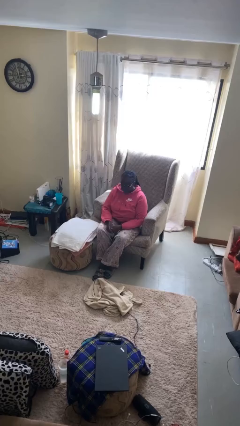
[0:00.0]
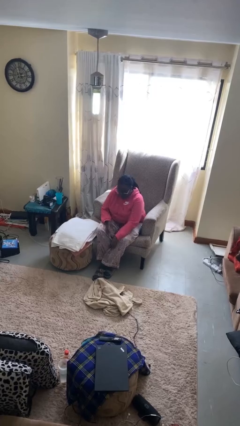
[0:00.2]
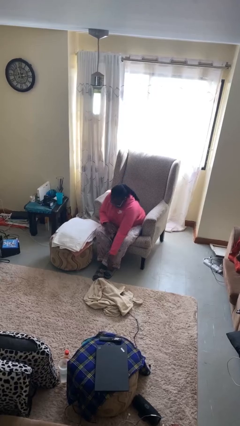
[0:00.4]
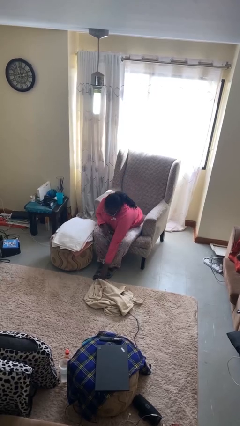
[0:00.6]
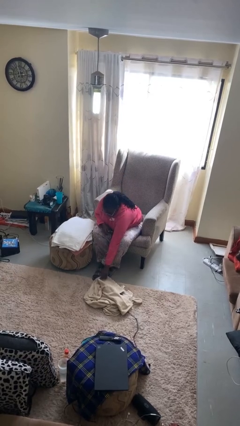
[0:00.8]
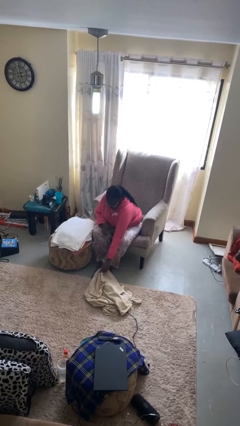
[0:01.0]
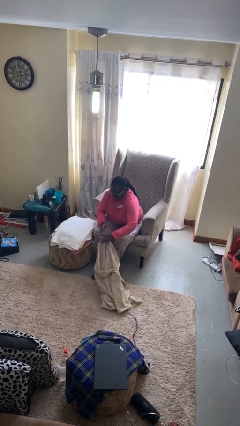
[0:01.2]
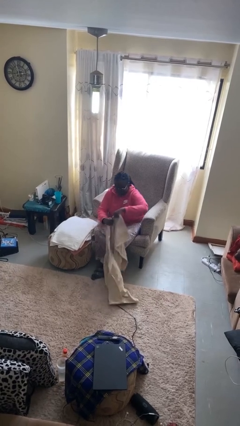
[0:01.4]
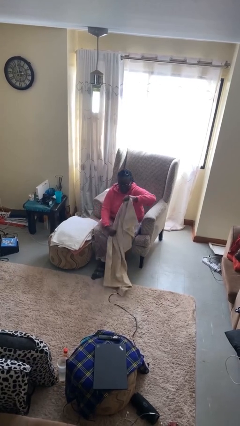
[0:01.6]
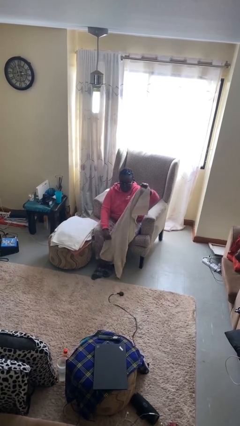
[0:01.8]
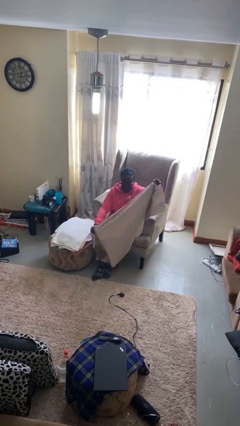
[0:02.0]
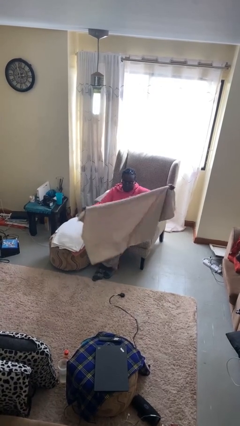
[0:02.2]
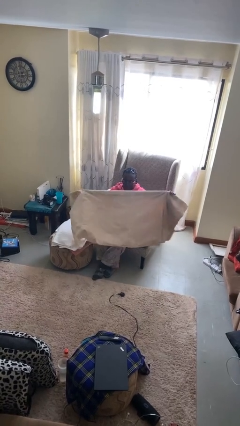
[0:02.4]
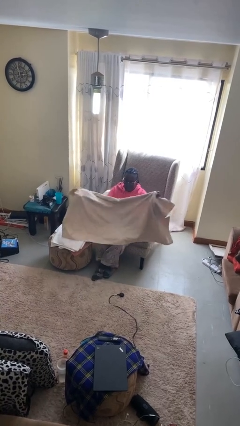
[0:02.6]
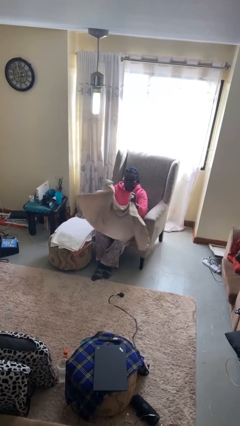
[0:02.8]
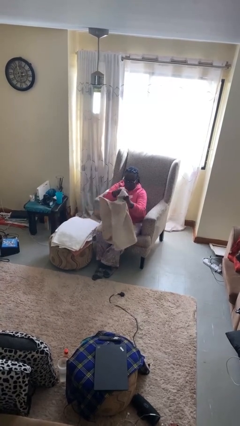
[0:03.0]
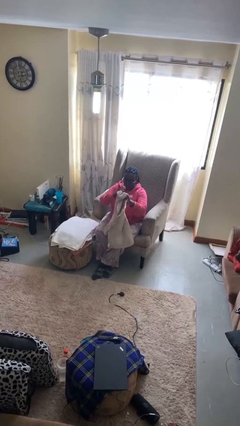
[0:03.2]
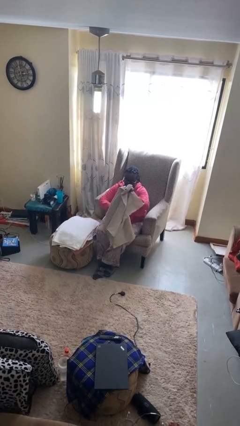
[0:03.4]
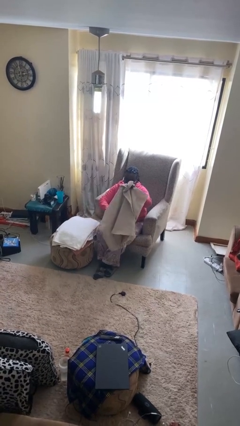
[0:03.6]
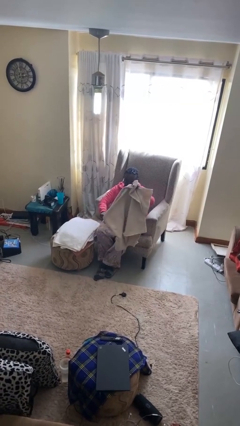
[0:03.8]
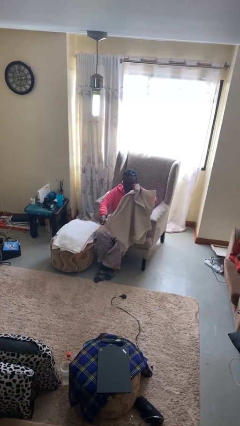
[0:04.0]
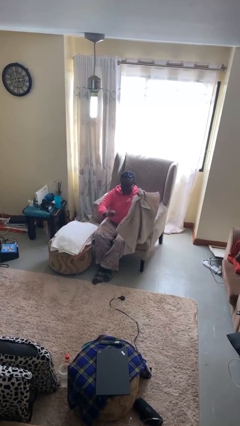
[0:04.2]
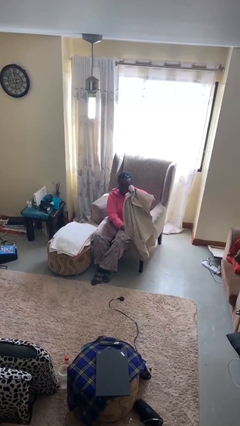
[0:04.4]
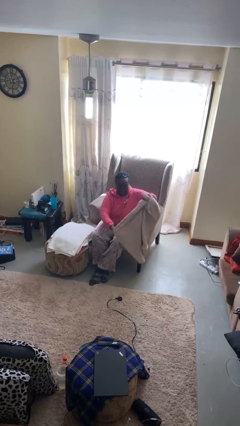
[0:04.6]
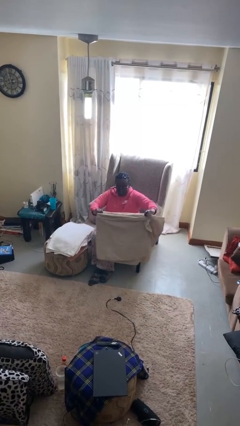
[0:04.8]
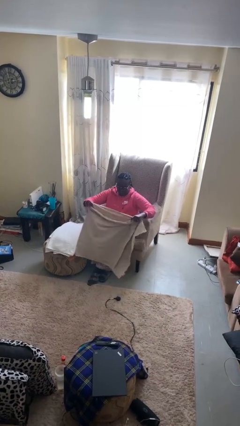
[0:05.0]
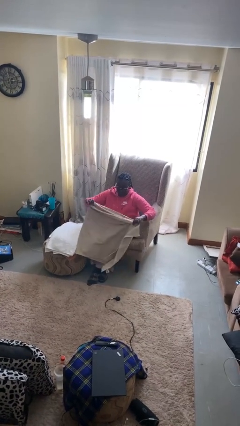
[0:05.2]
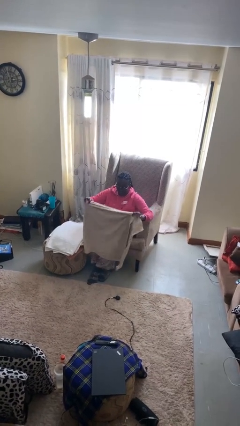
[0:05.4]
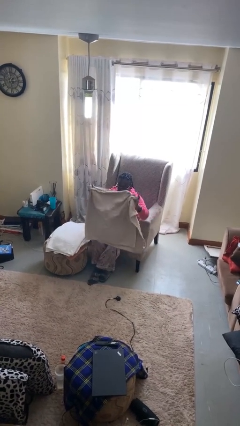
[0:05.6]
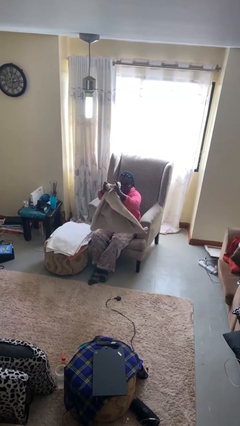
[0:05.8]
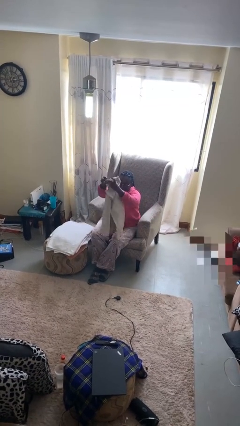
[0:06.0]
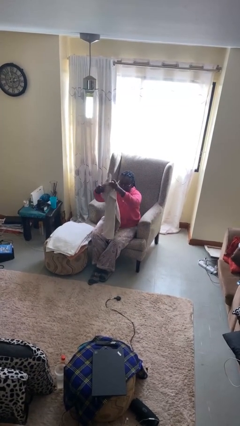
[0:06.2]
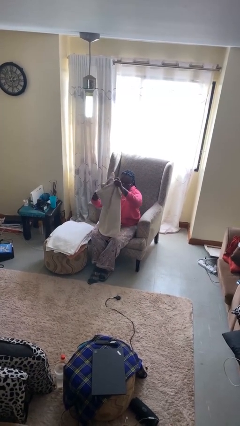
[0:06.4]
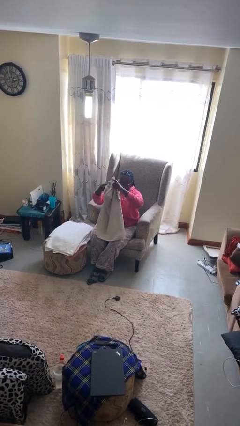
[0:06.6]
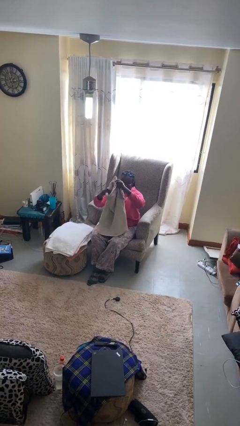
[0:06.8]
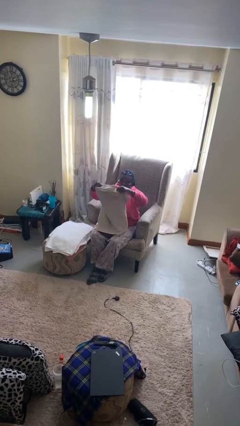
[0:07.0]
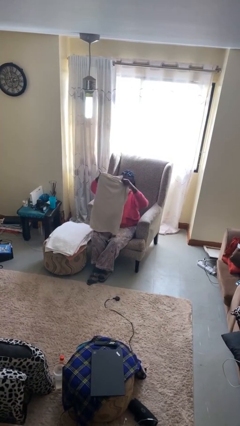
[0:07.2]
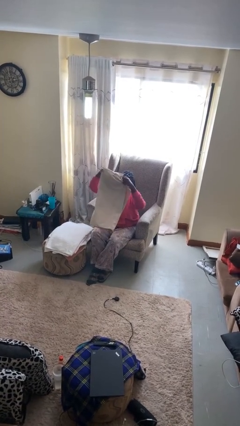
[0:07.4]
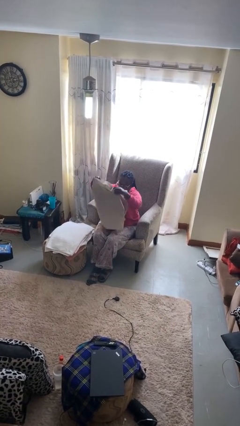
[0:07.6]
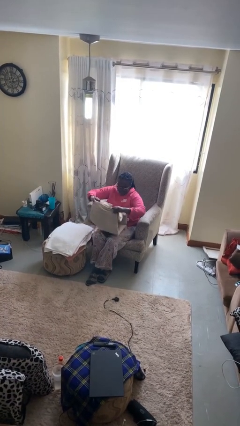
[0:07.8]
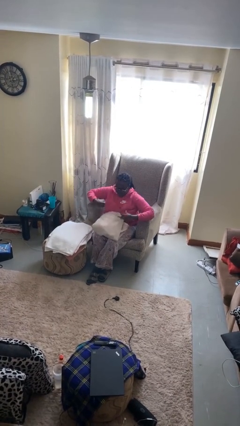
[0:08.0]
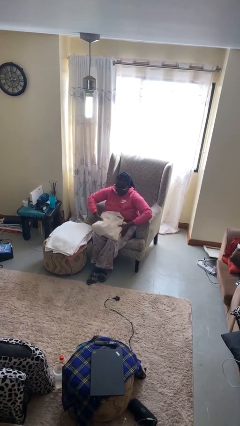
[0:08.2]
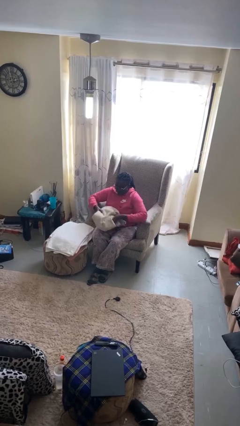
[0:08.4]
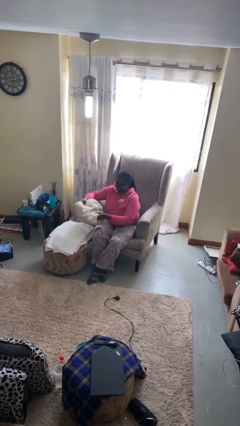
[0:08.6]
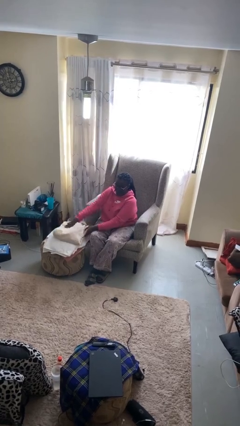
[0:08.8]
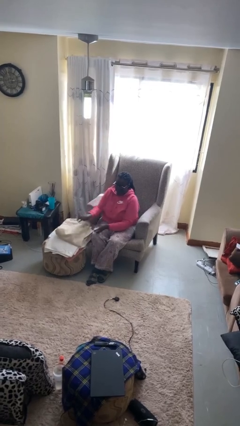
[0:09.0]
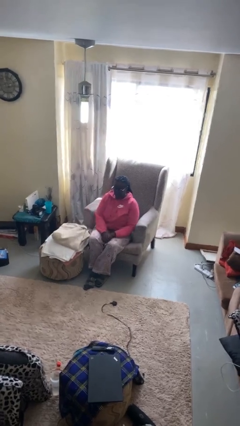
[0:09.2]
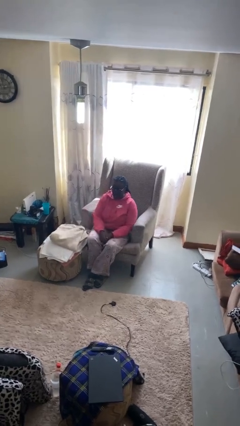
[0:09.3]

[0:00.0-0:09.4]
person folds towel

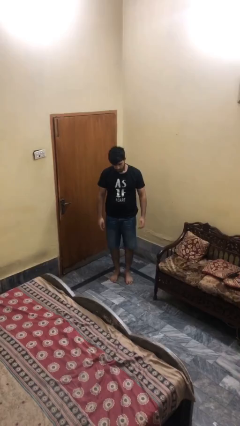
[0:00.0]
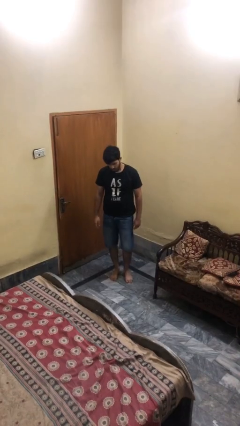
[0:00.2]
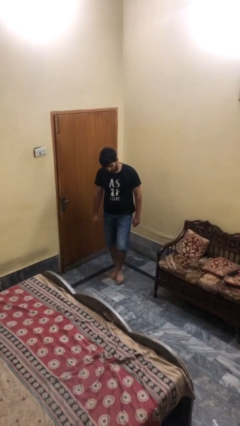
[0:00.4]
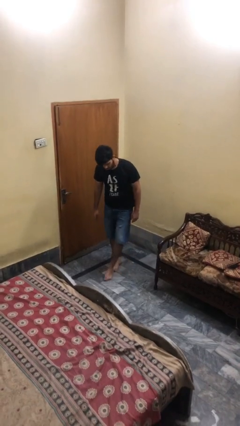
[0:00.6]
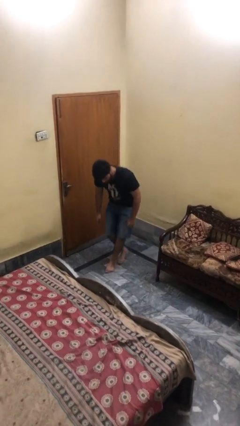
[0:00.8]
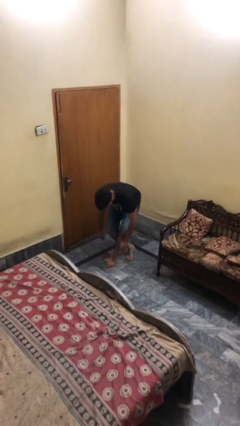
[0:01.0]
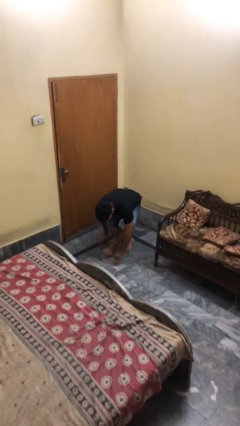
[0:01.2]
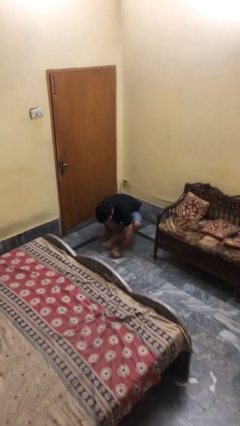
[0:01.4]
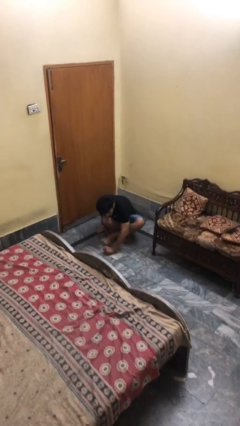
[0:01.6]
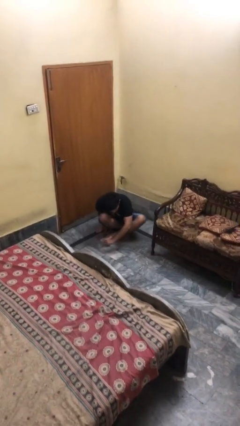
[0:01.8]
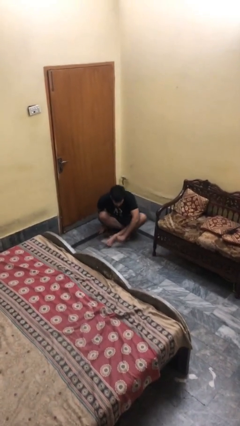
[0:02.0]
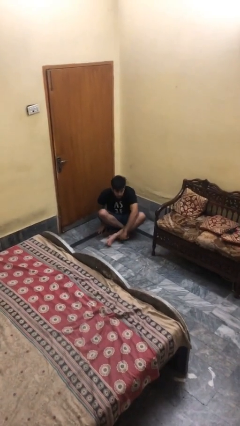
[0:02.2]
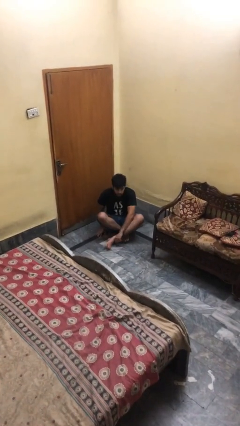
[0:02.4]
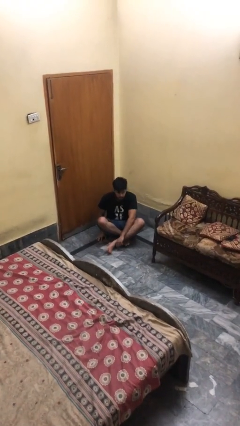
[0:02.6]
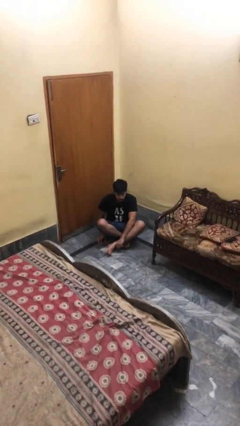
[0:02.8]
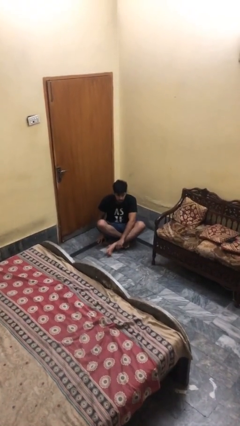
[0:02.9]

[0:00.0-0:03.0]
person sits crisscross

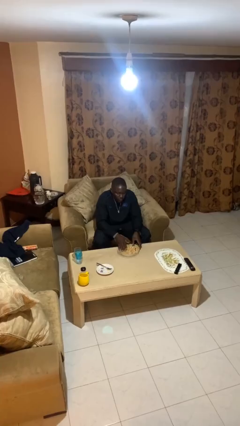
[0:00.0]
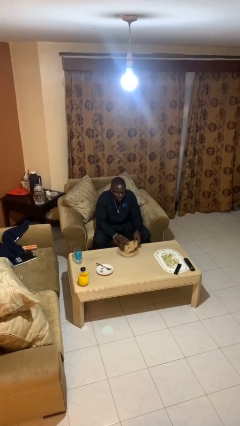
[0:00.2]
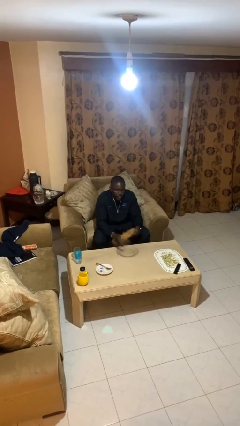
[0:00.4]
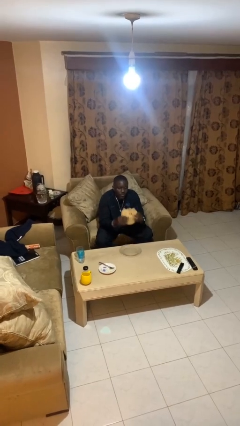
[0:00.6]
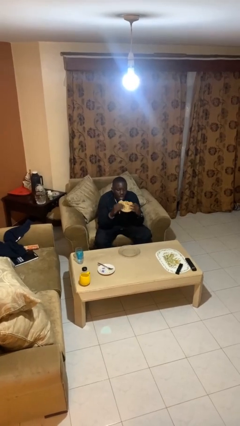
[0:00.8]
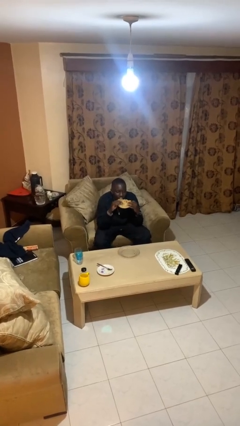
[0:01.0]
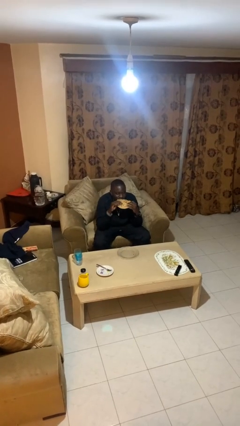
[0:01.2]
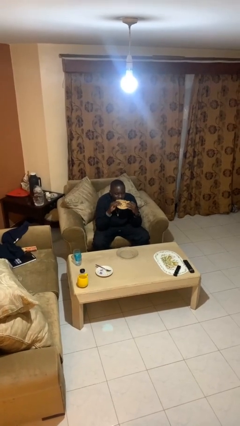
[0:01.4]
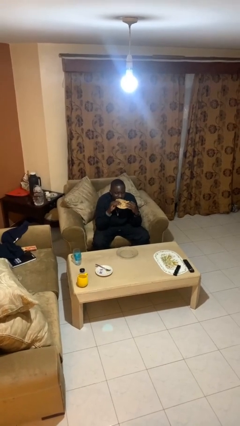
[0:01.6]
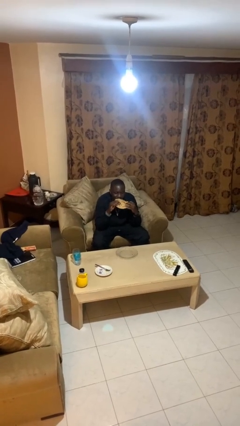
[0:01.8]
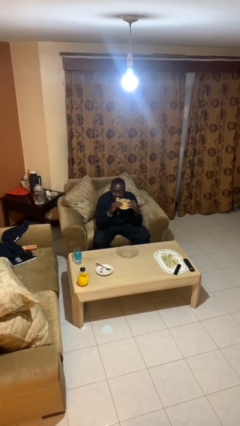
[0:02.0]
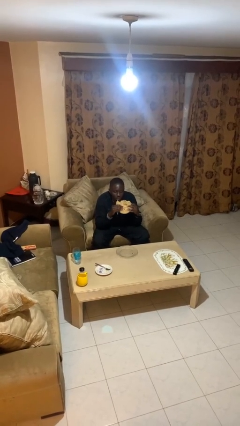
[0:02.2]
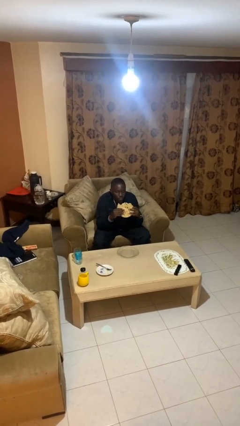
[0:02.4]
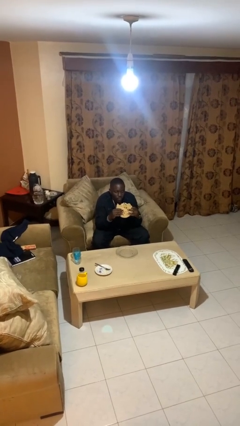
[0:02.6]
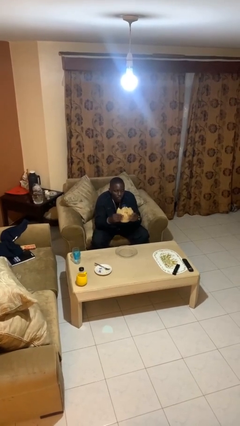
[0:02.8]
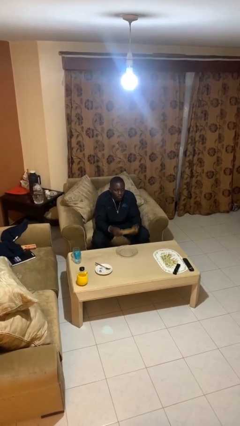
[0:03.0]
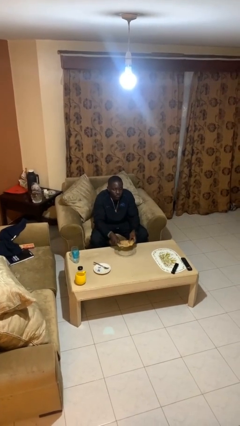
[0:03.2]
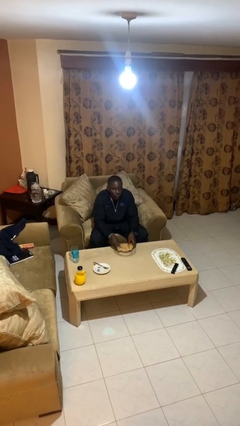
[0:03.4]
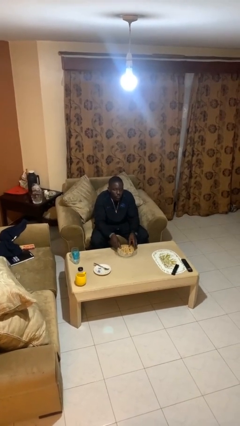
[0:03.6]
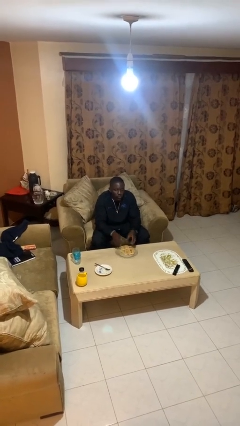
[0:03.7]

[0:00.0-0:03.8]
person eats with hands

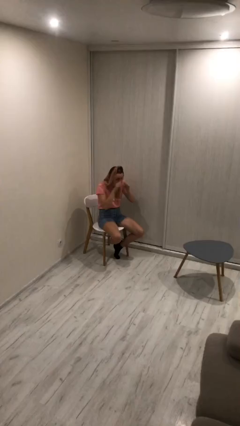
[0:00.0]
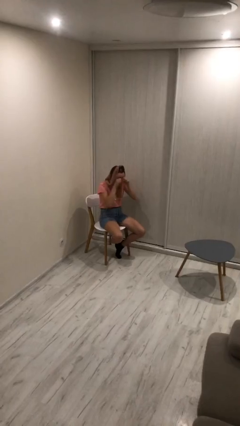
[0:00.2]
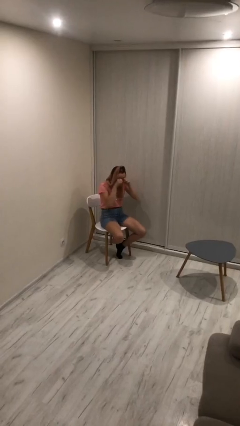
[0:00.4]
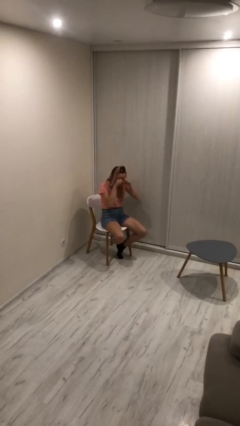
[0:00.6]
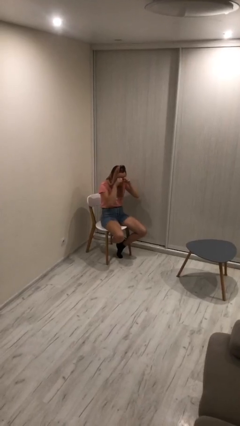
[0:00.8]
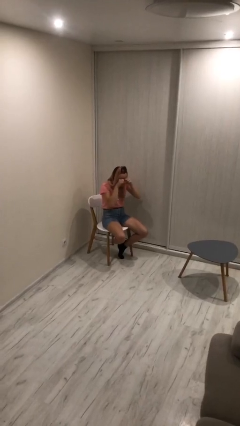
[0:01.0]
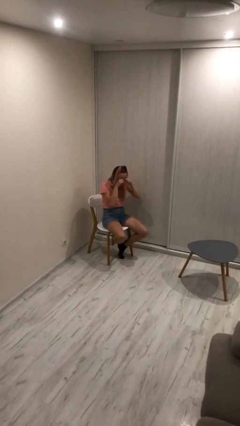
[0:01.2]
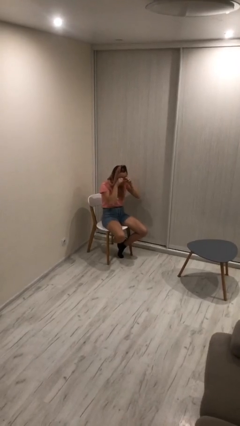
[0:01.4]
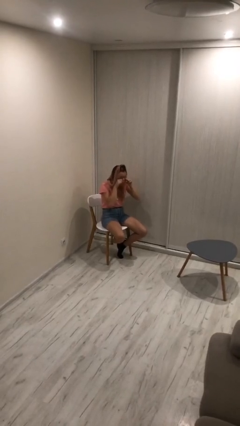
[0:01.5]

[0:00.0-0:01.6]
person rubs eyes
